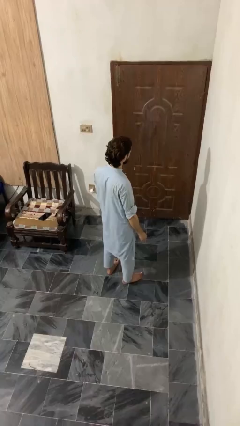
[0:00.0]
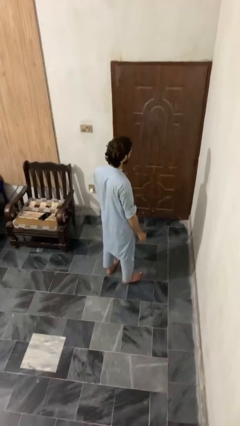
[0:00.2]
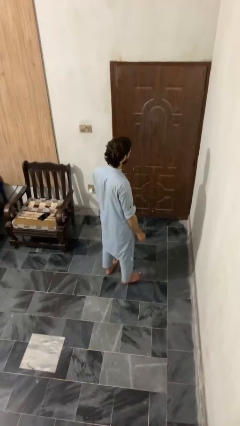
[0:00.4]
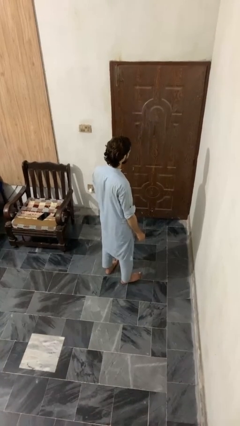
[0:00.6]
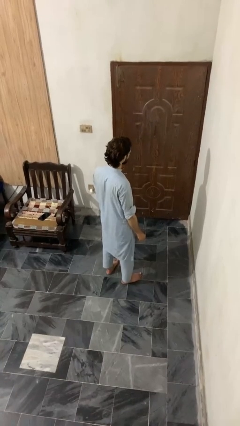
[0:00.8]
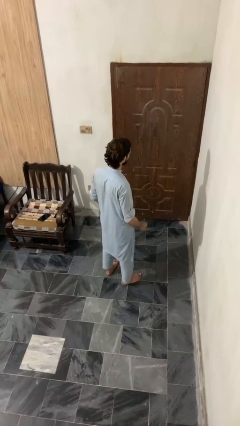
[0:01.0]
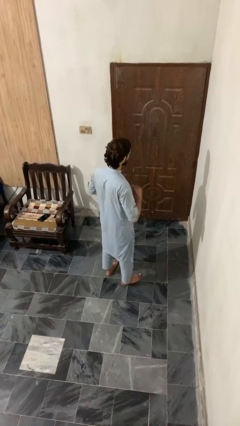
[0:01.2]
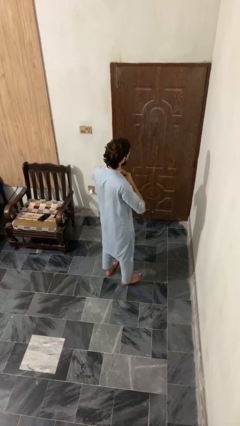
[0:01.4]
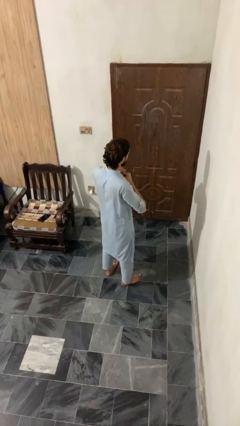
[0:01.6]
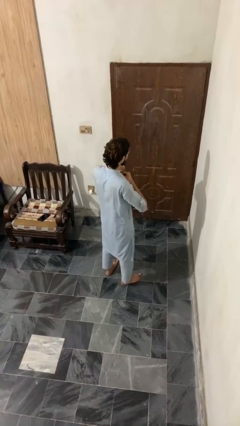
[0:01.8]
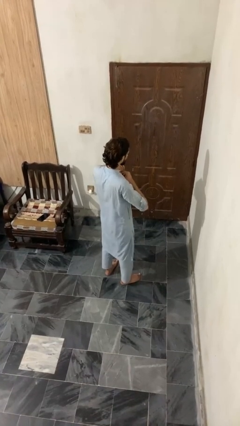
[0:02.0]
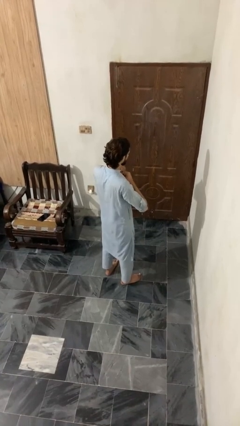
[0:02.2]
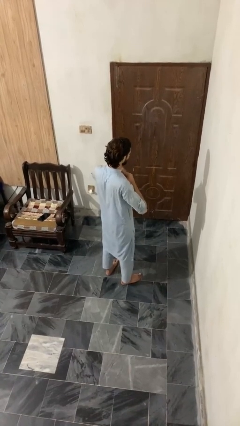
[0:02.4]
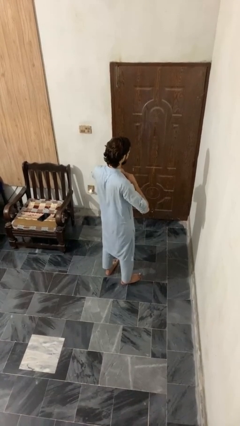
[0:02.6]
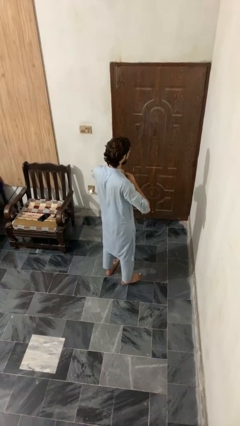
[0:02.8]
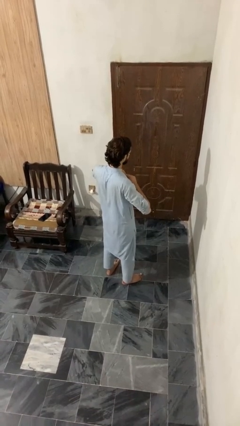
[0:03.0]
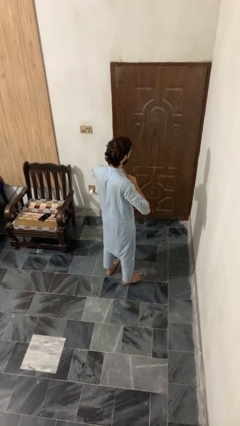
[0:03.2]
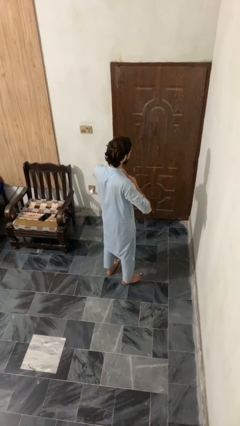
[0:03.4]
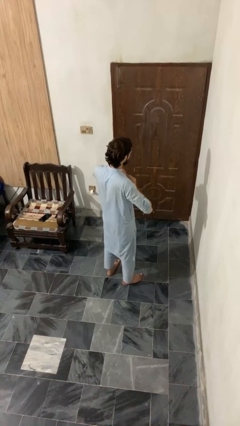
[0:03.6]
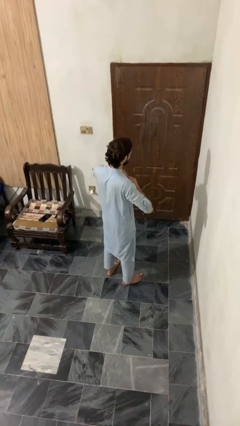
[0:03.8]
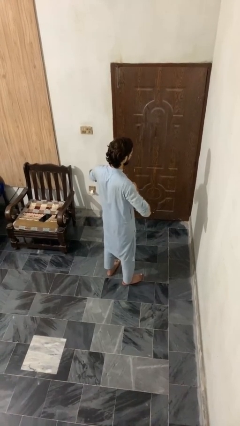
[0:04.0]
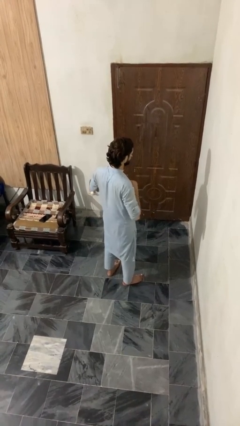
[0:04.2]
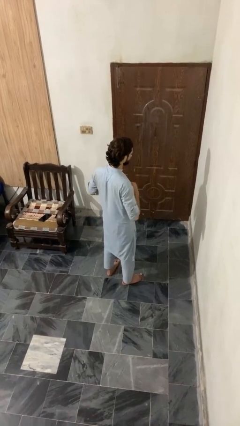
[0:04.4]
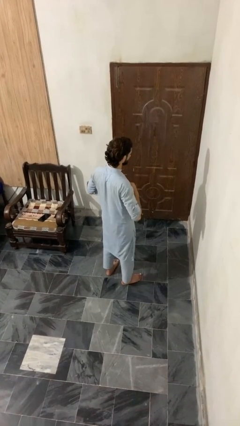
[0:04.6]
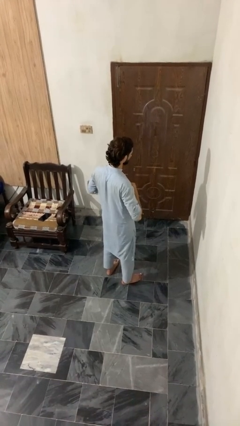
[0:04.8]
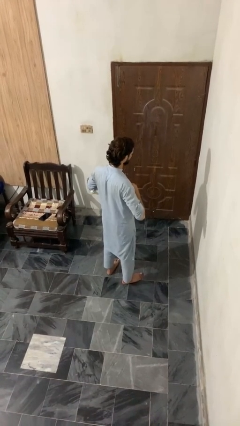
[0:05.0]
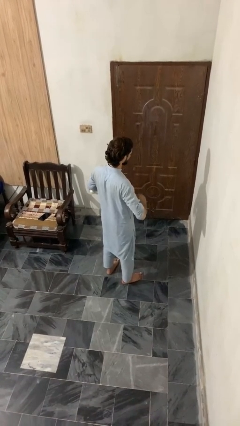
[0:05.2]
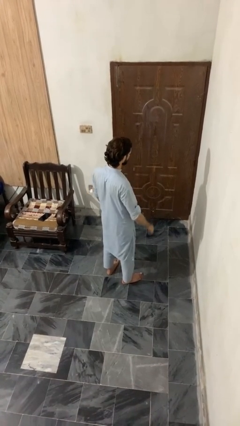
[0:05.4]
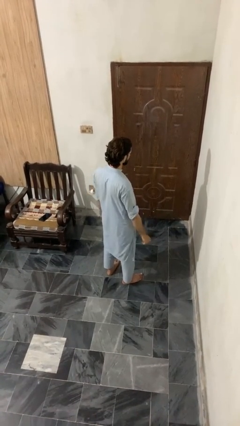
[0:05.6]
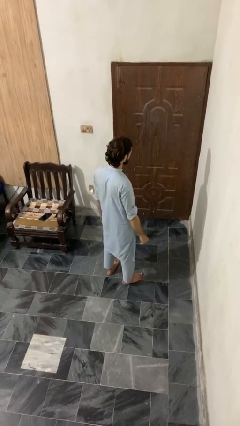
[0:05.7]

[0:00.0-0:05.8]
person unbuttons shirt

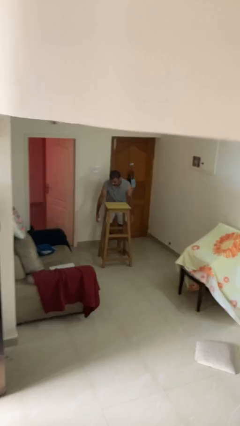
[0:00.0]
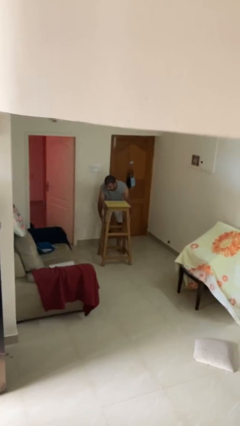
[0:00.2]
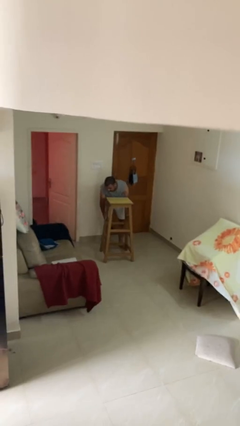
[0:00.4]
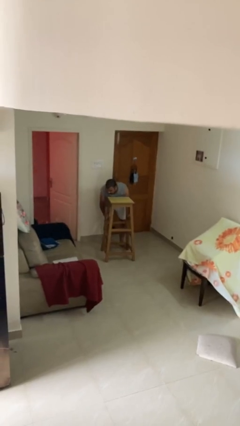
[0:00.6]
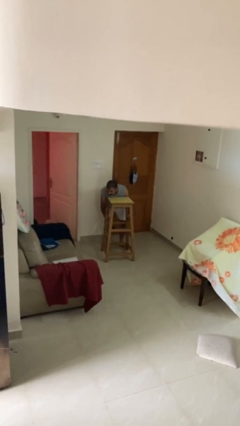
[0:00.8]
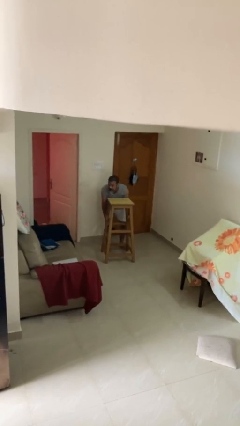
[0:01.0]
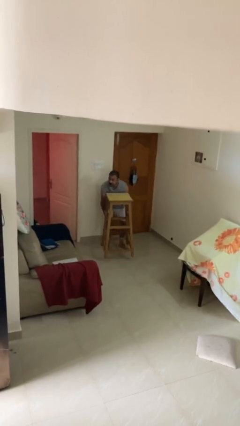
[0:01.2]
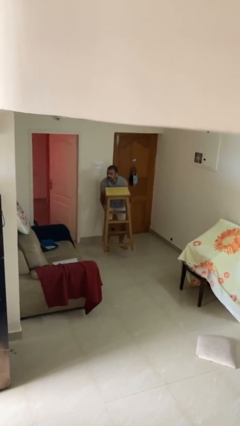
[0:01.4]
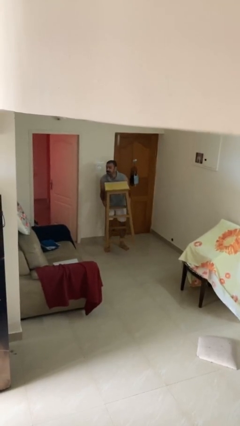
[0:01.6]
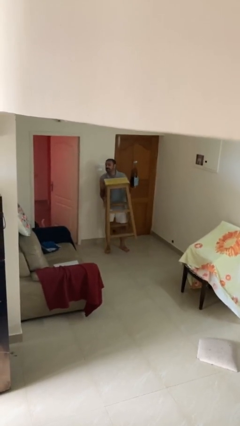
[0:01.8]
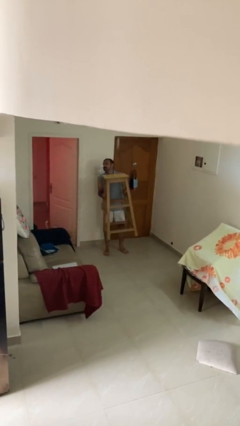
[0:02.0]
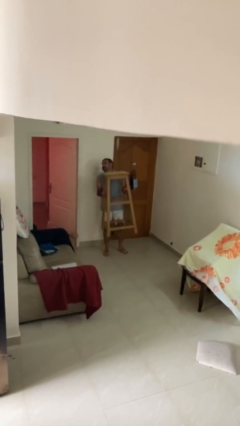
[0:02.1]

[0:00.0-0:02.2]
person picks up object from floor

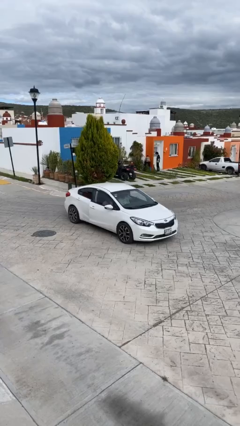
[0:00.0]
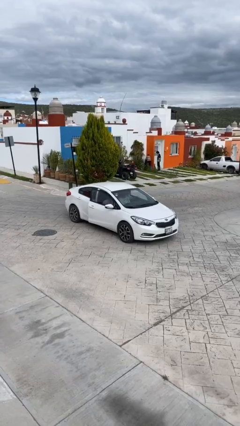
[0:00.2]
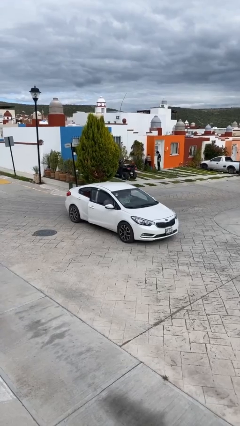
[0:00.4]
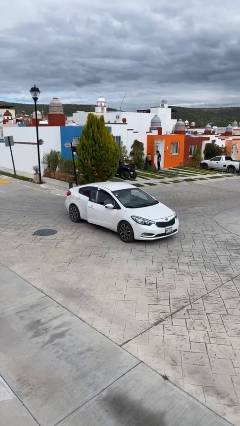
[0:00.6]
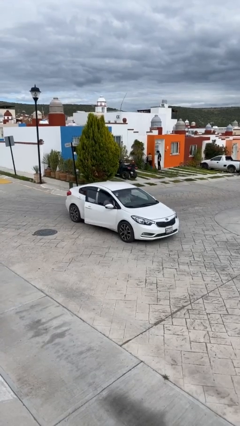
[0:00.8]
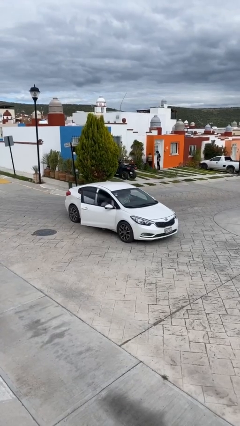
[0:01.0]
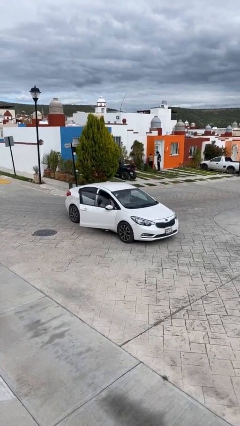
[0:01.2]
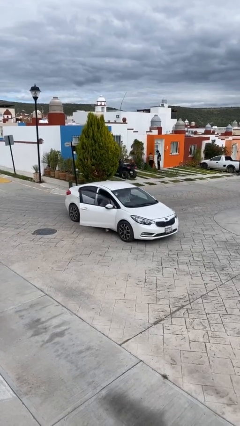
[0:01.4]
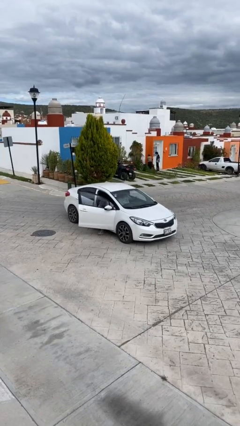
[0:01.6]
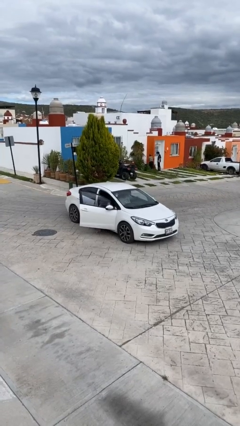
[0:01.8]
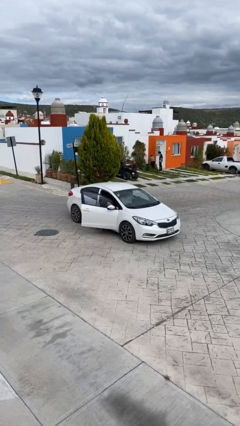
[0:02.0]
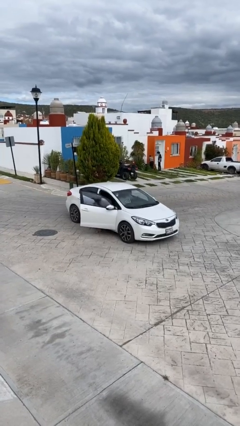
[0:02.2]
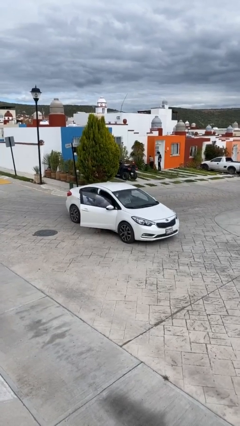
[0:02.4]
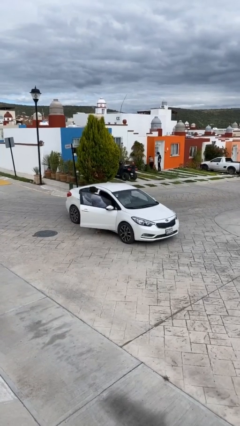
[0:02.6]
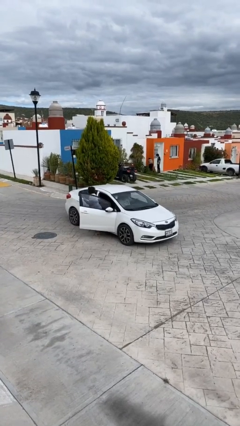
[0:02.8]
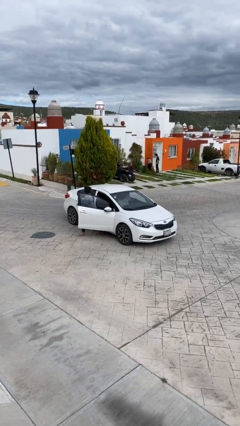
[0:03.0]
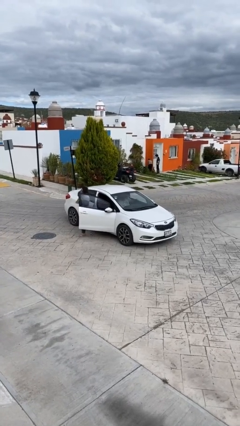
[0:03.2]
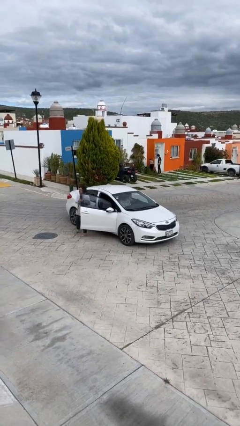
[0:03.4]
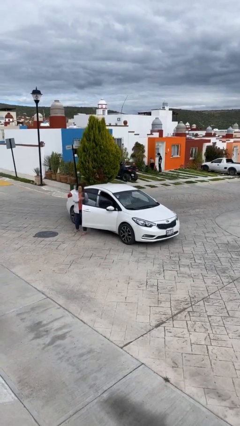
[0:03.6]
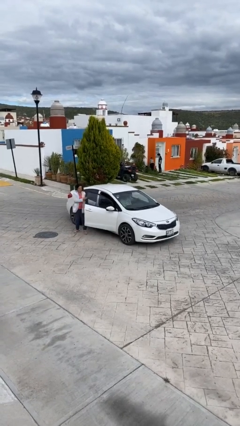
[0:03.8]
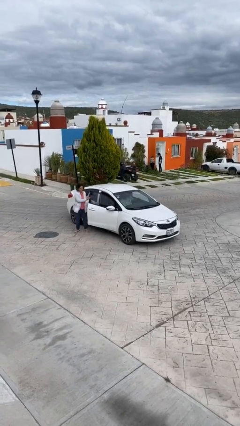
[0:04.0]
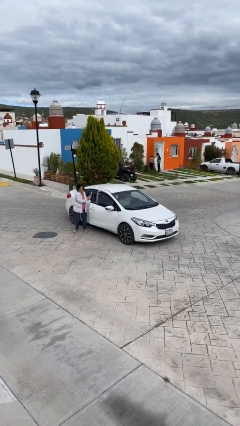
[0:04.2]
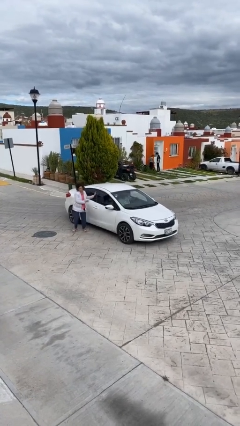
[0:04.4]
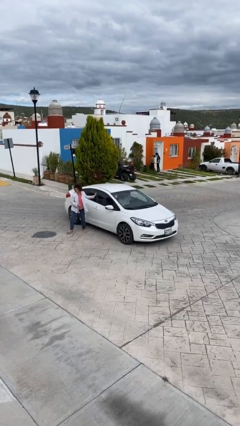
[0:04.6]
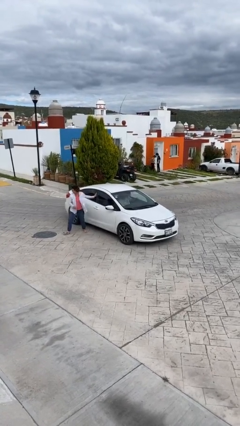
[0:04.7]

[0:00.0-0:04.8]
car drops off person

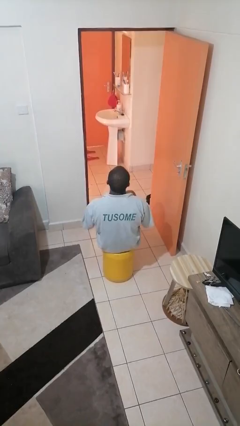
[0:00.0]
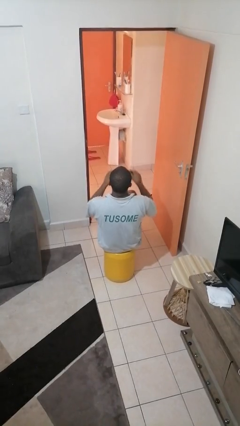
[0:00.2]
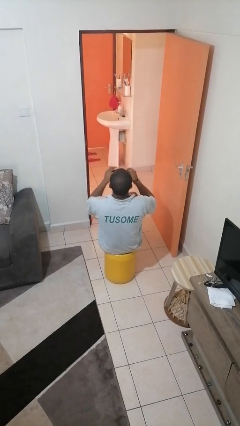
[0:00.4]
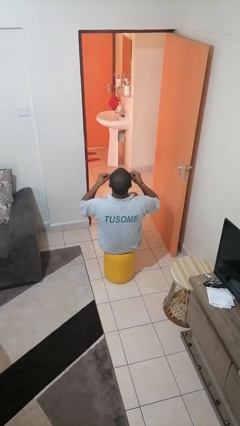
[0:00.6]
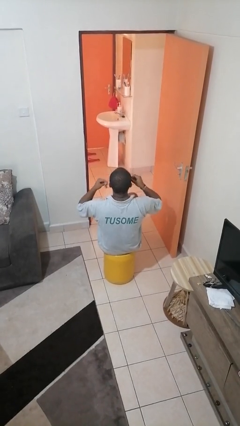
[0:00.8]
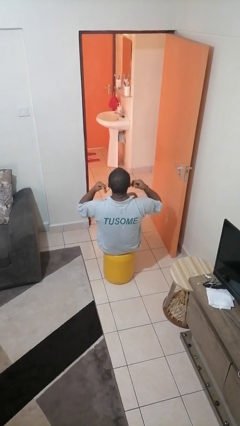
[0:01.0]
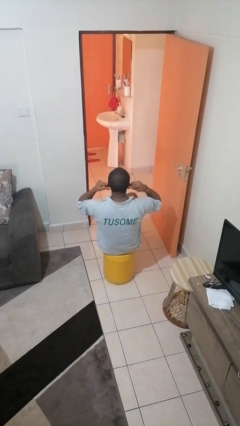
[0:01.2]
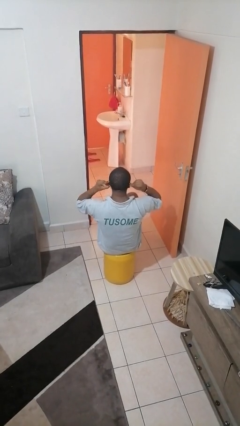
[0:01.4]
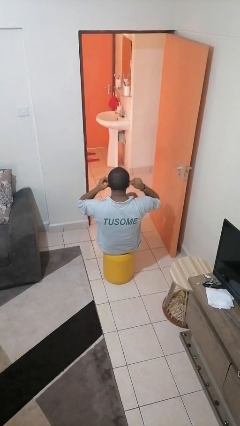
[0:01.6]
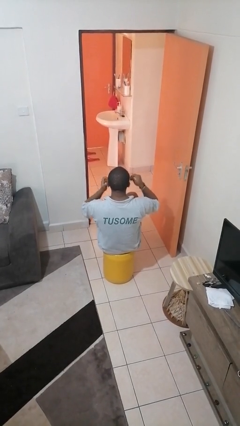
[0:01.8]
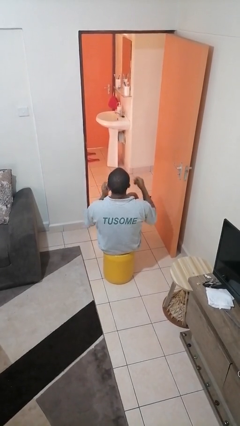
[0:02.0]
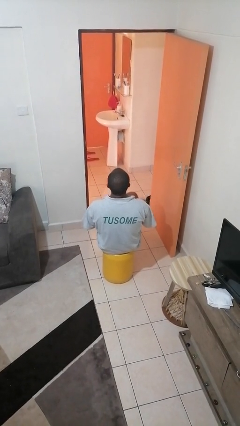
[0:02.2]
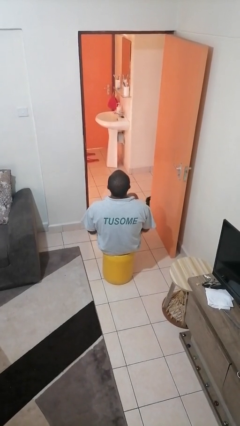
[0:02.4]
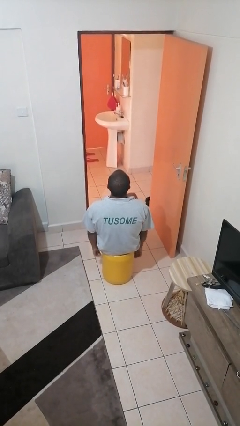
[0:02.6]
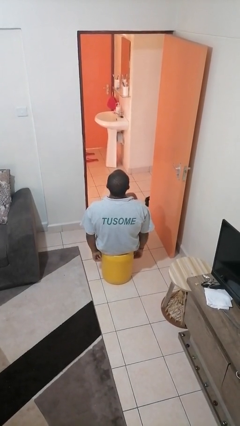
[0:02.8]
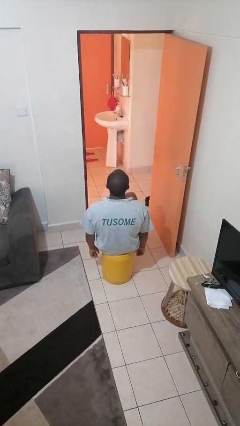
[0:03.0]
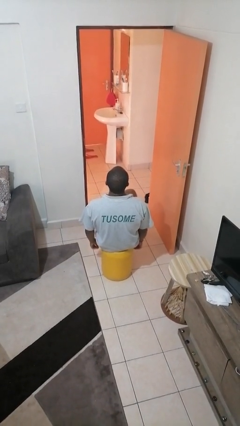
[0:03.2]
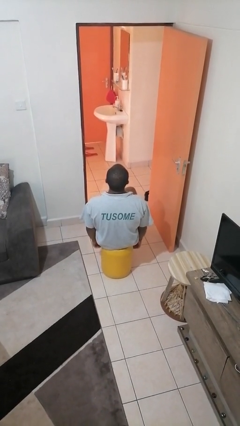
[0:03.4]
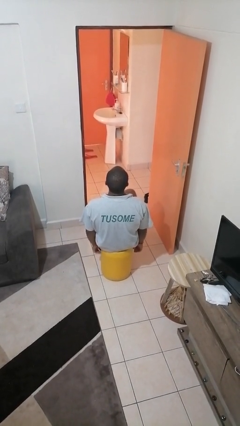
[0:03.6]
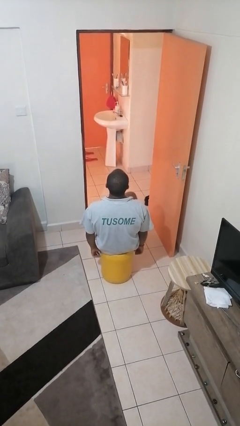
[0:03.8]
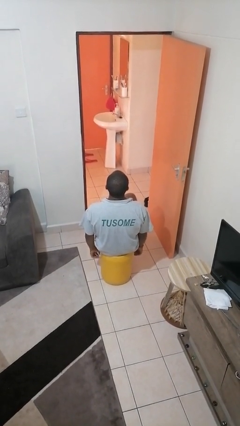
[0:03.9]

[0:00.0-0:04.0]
person puts on facemask

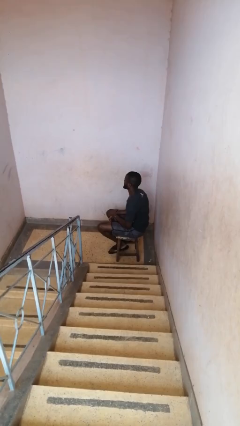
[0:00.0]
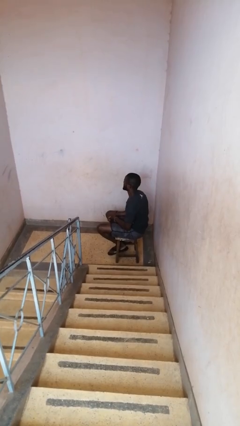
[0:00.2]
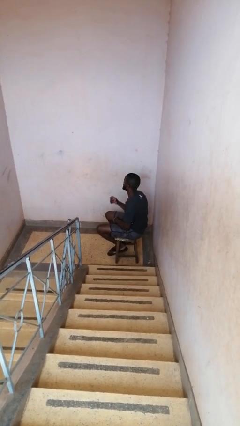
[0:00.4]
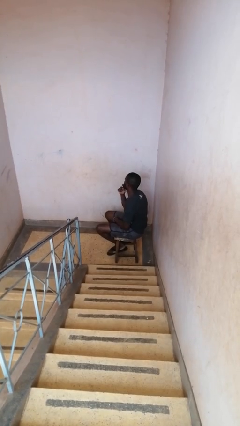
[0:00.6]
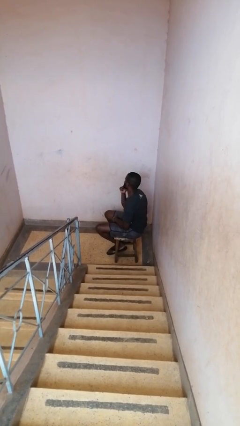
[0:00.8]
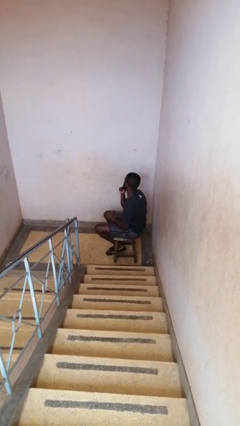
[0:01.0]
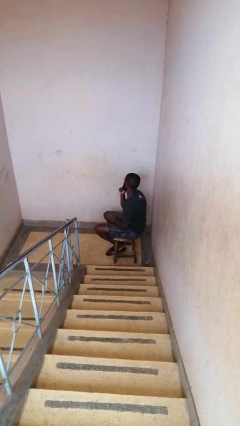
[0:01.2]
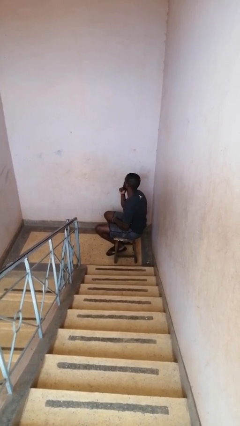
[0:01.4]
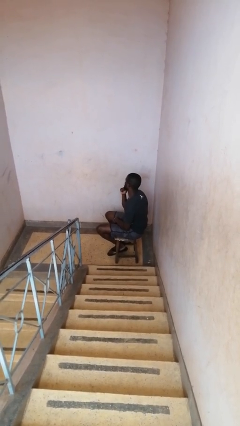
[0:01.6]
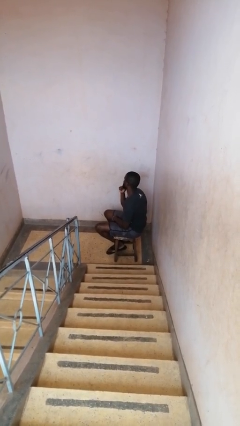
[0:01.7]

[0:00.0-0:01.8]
person strokes chin
